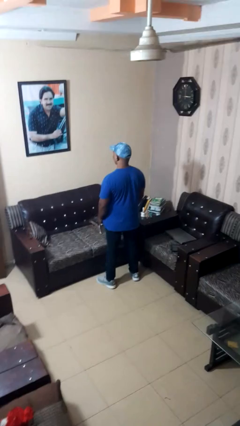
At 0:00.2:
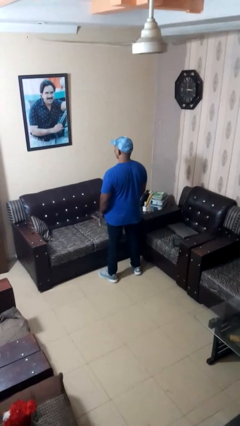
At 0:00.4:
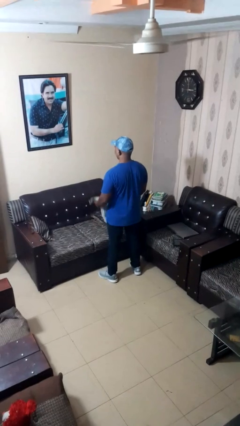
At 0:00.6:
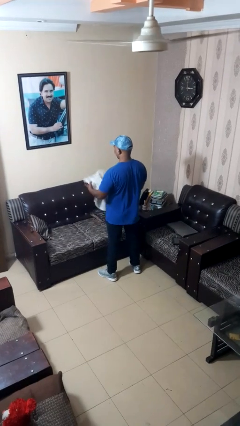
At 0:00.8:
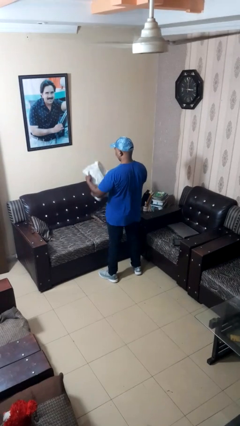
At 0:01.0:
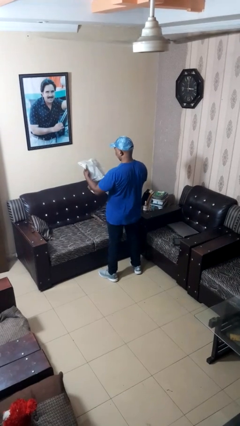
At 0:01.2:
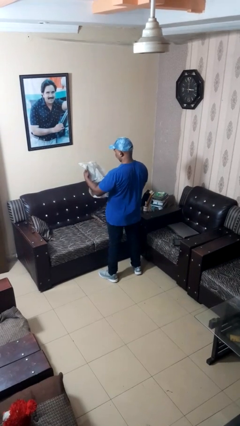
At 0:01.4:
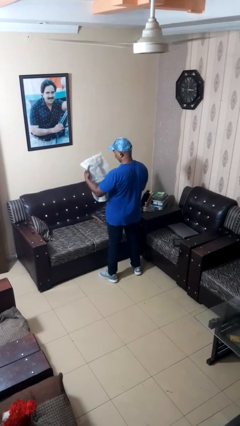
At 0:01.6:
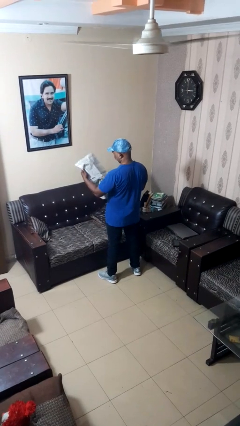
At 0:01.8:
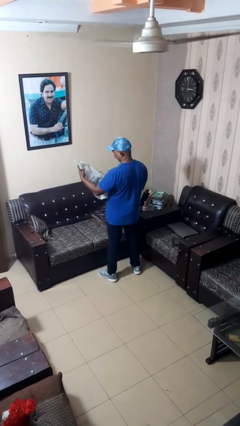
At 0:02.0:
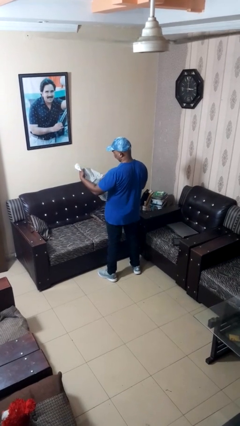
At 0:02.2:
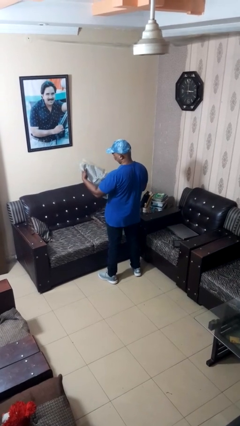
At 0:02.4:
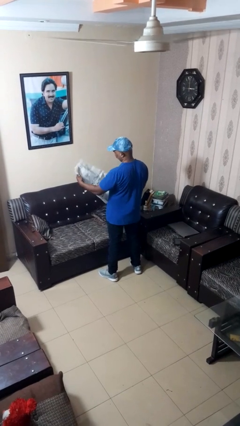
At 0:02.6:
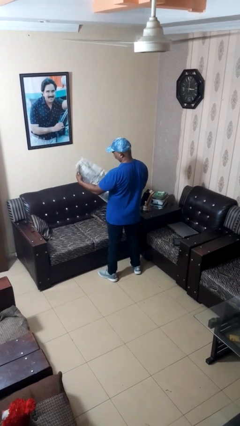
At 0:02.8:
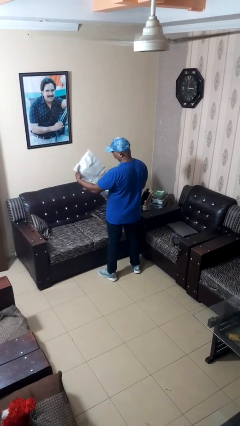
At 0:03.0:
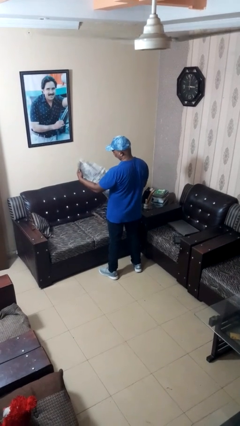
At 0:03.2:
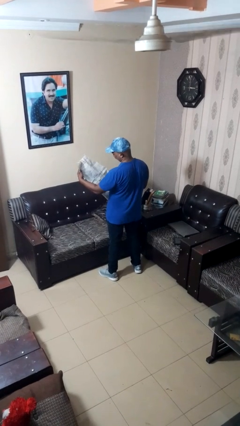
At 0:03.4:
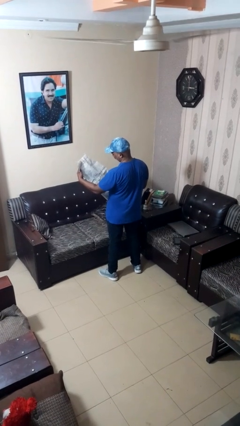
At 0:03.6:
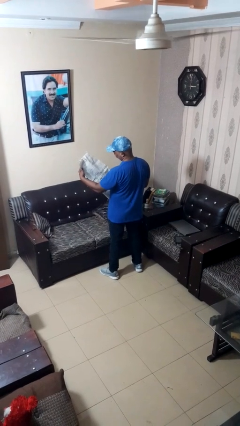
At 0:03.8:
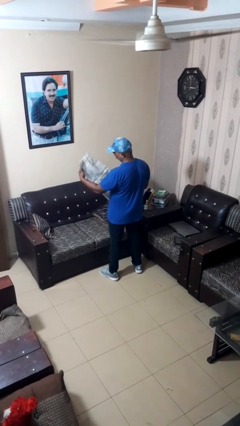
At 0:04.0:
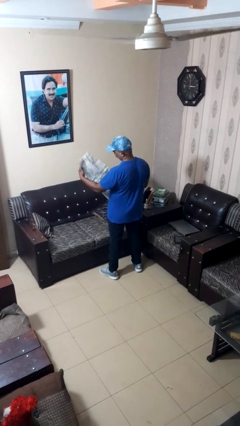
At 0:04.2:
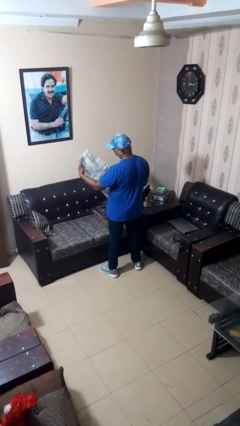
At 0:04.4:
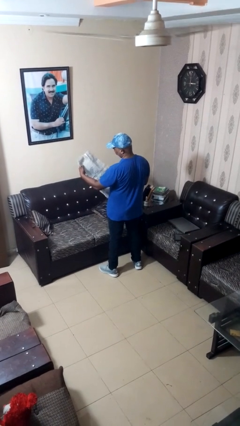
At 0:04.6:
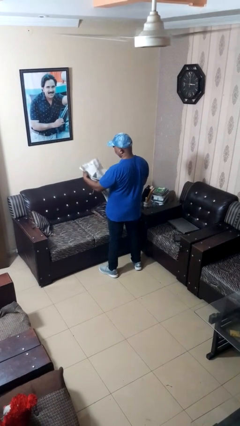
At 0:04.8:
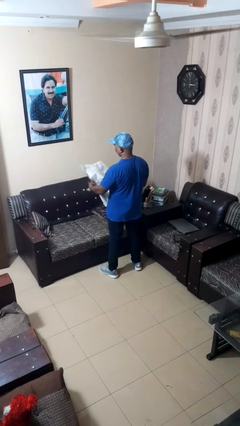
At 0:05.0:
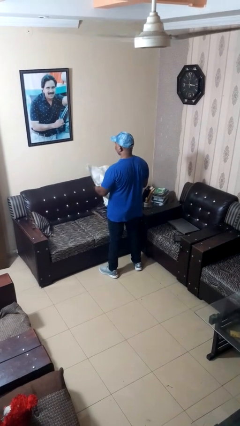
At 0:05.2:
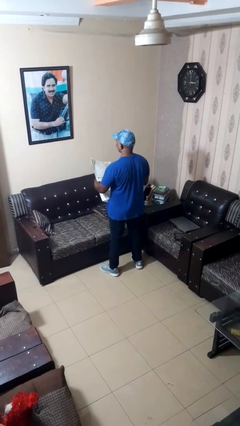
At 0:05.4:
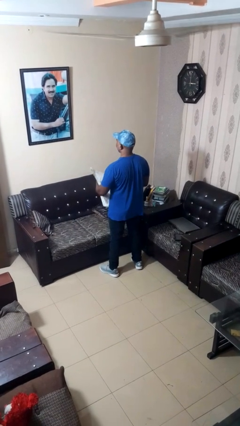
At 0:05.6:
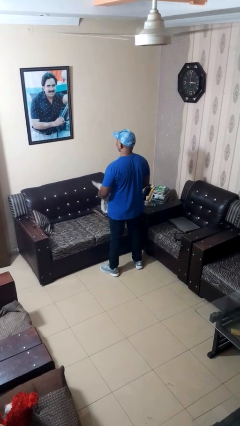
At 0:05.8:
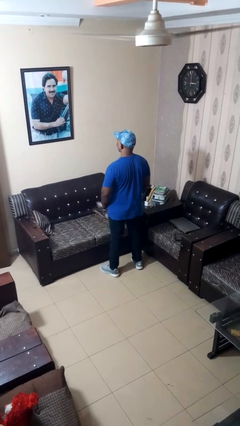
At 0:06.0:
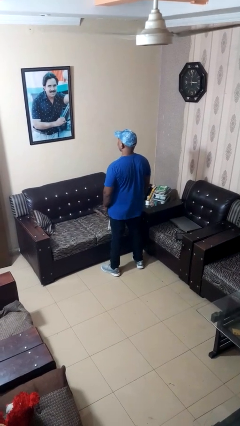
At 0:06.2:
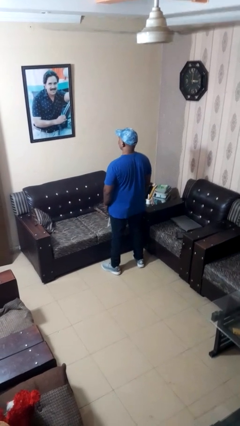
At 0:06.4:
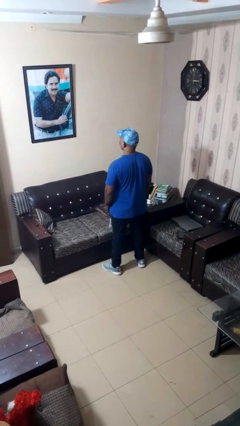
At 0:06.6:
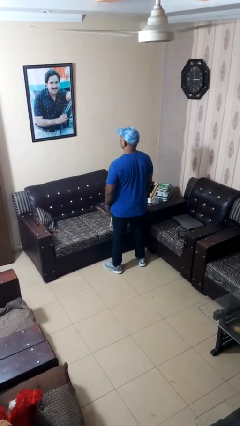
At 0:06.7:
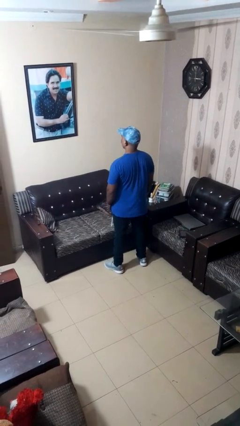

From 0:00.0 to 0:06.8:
person reads newspaper

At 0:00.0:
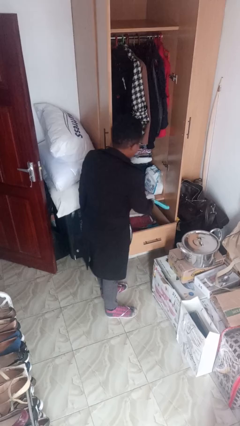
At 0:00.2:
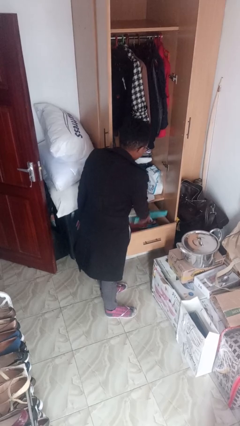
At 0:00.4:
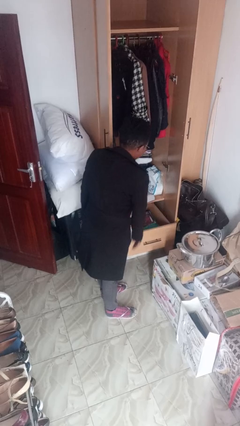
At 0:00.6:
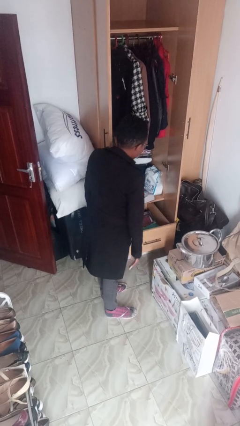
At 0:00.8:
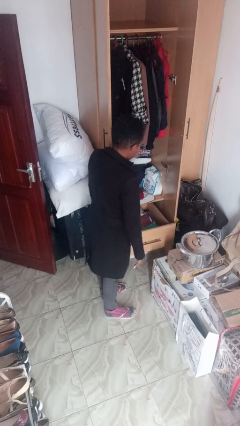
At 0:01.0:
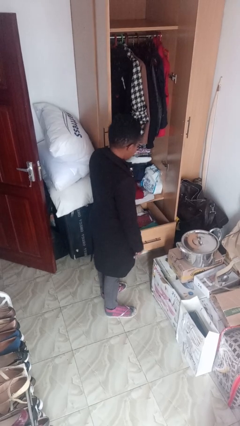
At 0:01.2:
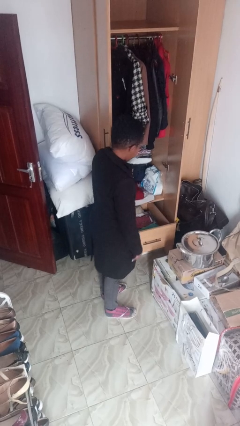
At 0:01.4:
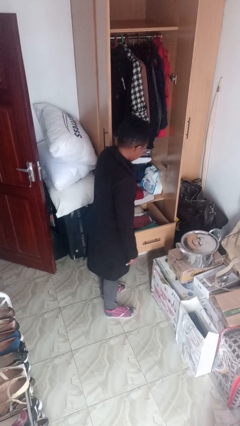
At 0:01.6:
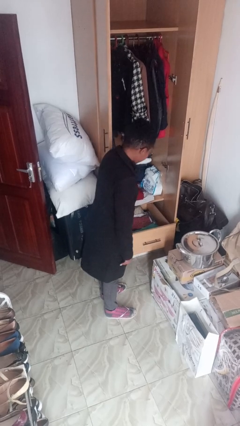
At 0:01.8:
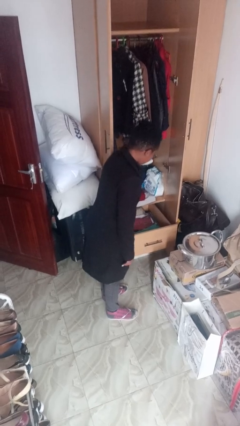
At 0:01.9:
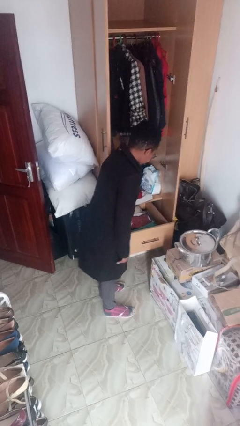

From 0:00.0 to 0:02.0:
person puts clothes into dresser

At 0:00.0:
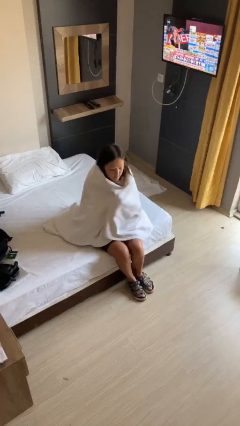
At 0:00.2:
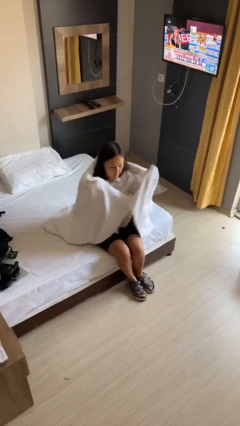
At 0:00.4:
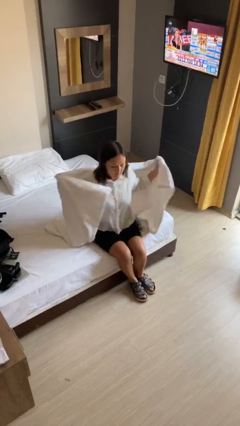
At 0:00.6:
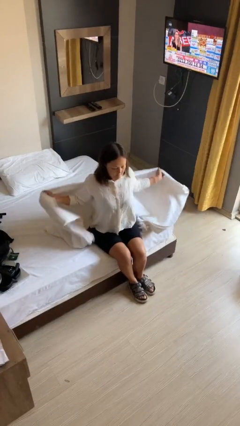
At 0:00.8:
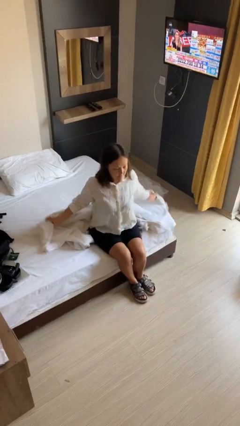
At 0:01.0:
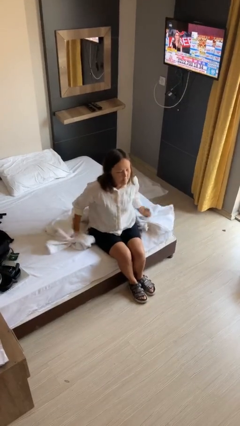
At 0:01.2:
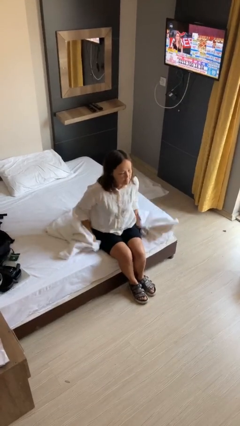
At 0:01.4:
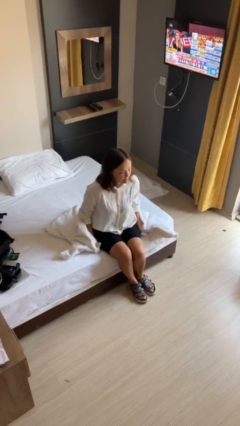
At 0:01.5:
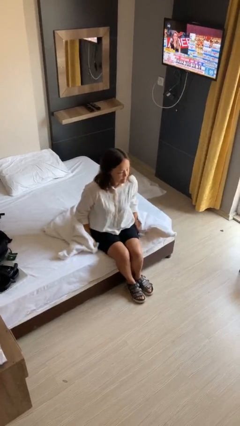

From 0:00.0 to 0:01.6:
person uncovers with blanket

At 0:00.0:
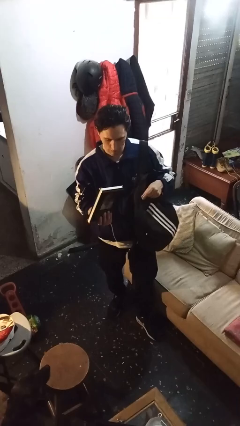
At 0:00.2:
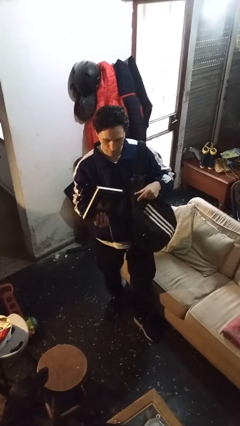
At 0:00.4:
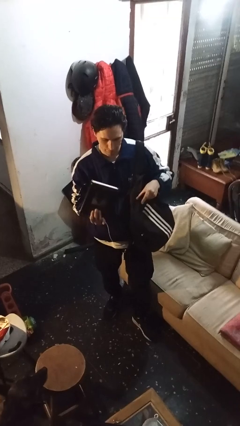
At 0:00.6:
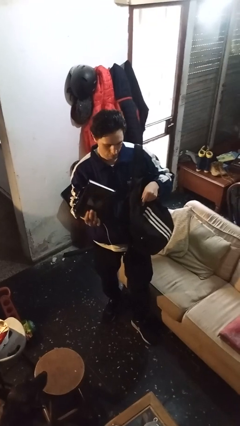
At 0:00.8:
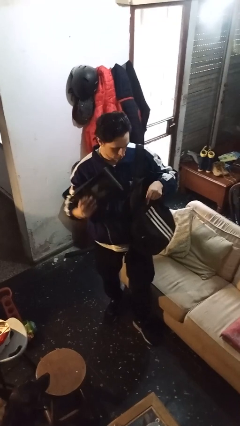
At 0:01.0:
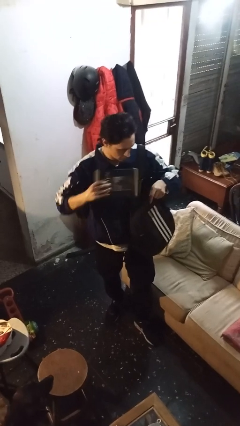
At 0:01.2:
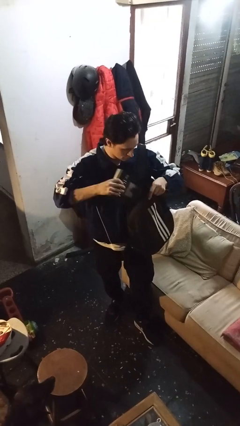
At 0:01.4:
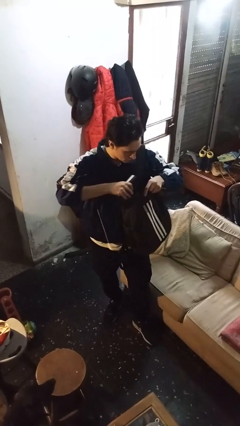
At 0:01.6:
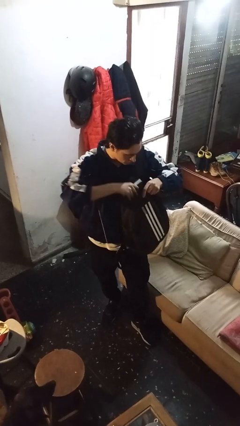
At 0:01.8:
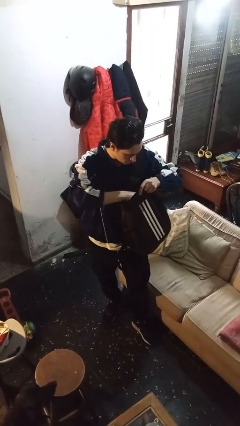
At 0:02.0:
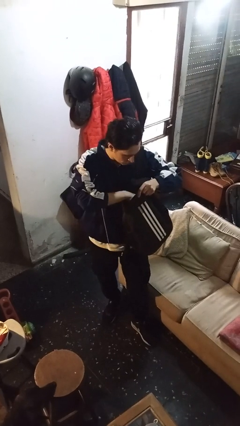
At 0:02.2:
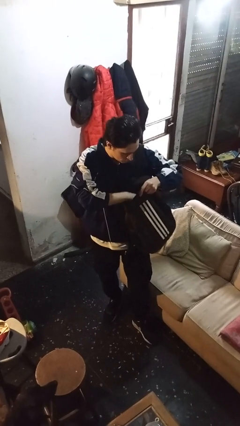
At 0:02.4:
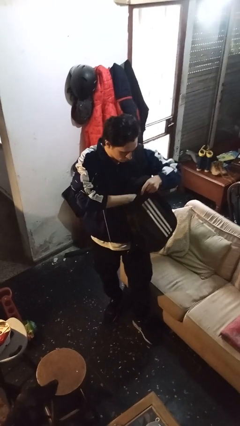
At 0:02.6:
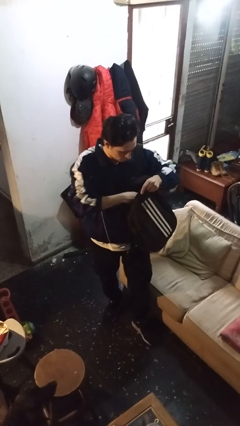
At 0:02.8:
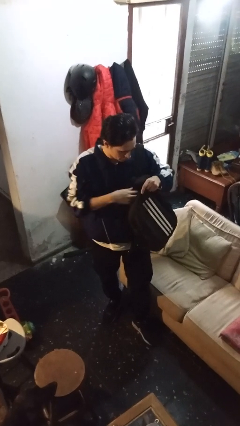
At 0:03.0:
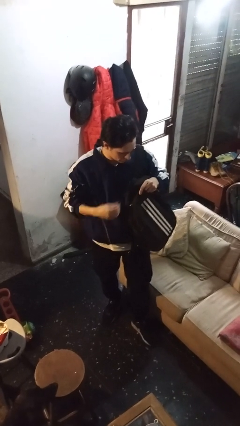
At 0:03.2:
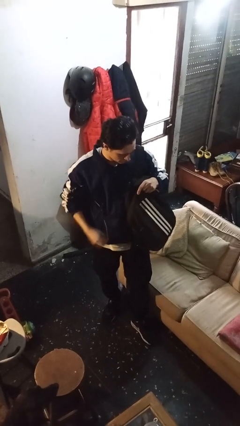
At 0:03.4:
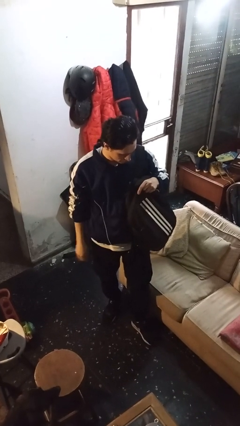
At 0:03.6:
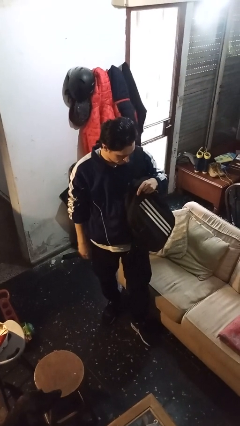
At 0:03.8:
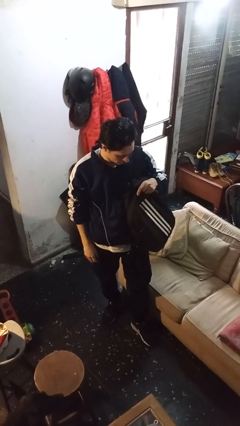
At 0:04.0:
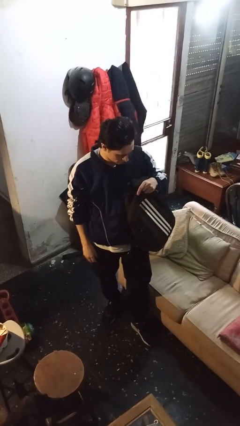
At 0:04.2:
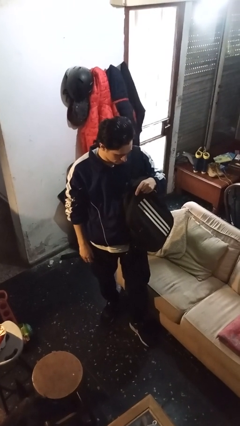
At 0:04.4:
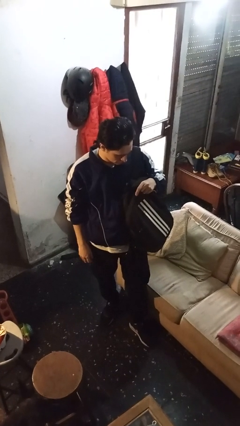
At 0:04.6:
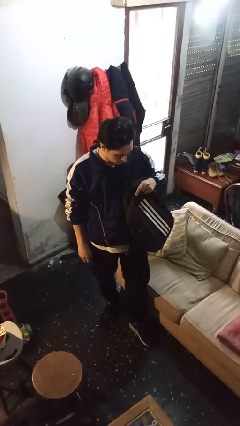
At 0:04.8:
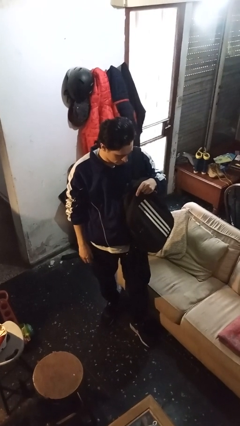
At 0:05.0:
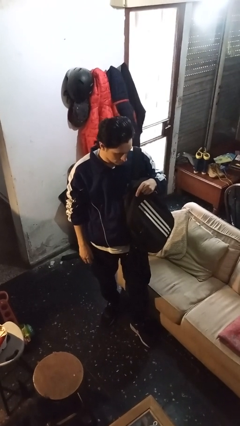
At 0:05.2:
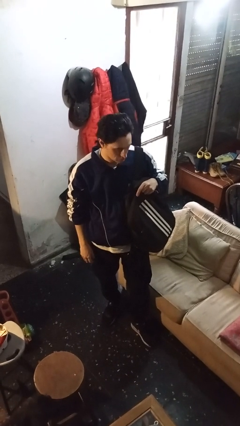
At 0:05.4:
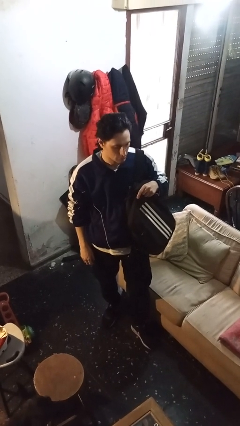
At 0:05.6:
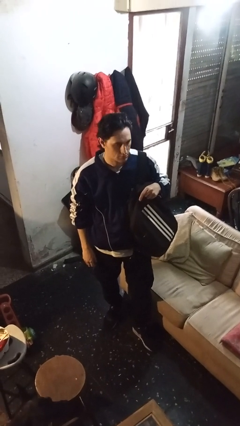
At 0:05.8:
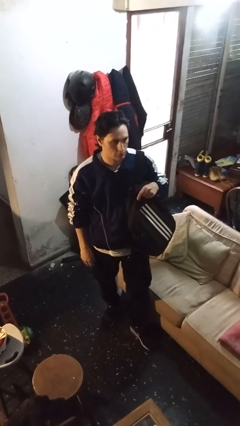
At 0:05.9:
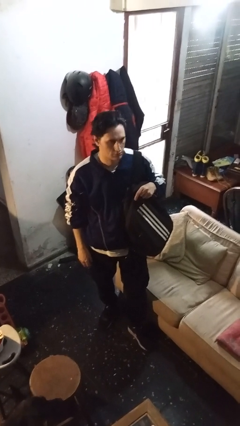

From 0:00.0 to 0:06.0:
person puts object into backpack

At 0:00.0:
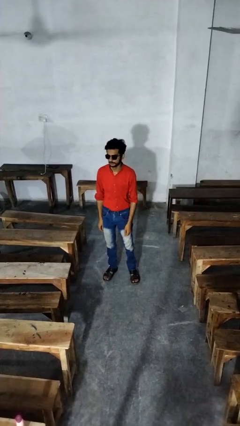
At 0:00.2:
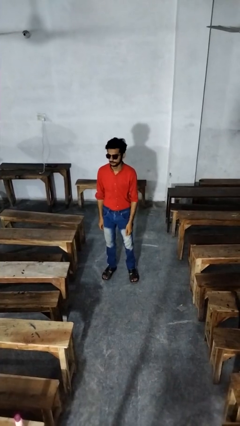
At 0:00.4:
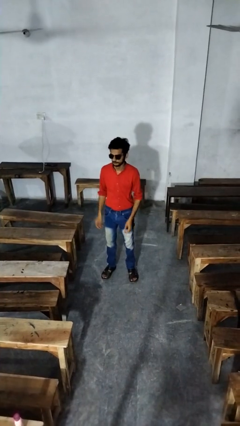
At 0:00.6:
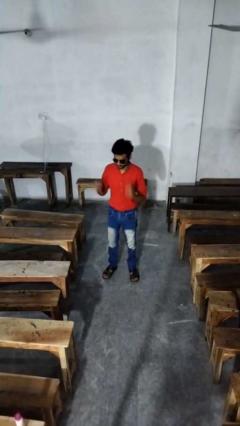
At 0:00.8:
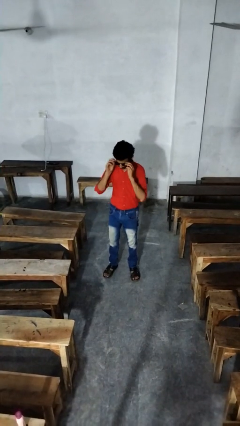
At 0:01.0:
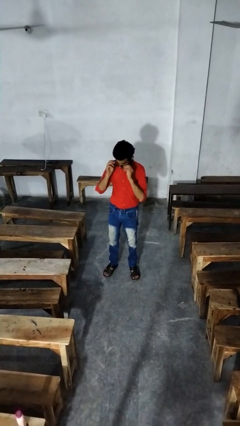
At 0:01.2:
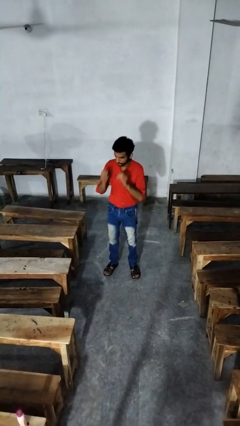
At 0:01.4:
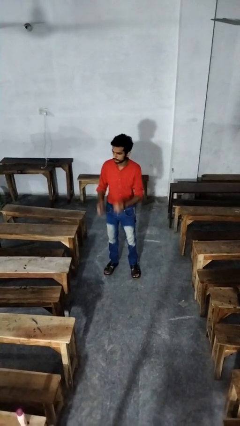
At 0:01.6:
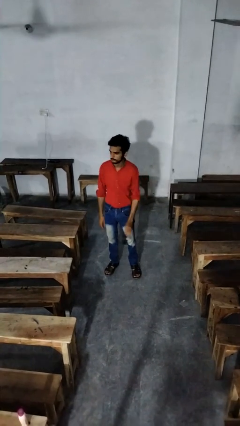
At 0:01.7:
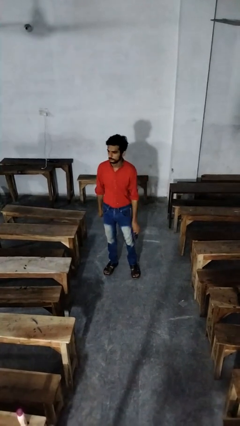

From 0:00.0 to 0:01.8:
person takes off sunglasses
